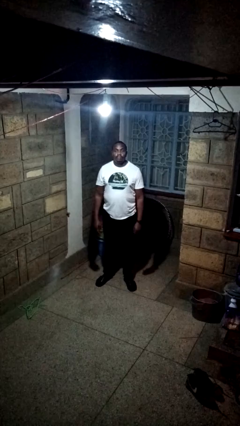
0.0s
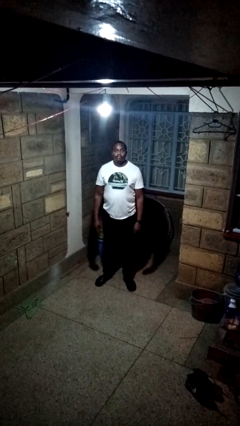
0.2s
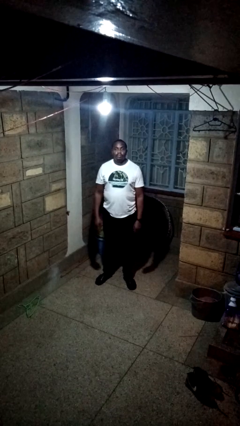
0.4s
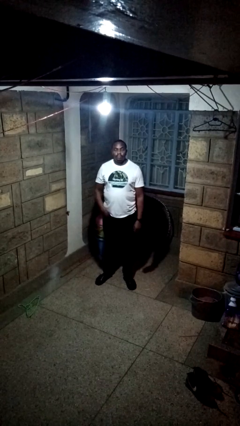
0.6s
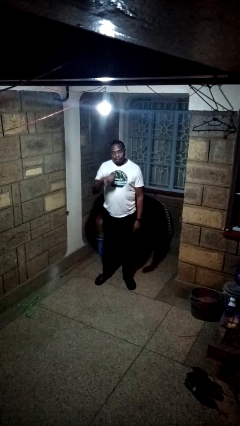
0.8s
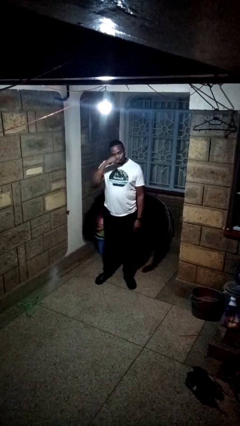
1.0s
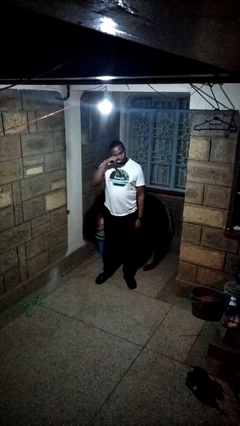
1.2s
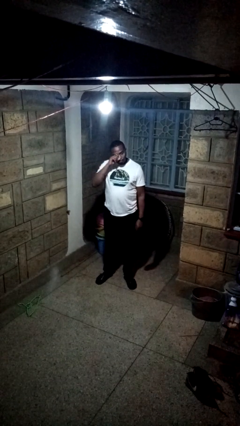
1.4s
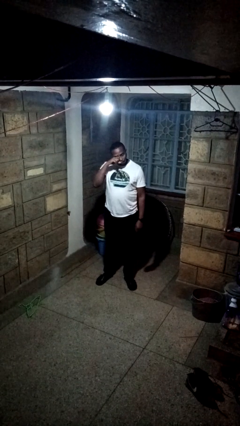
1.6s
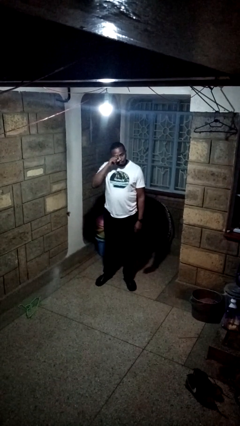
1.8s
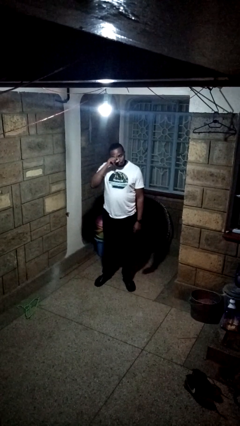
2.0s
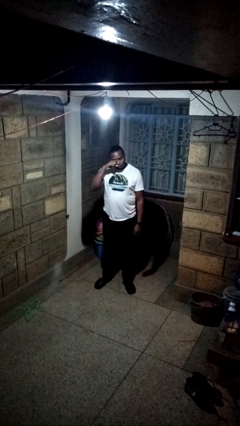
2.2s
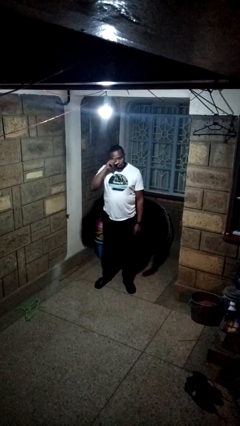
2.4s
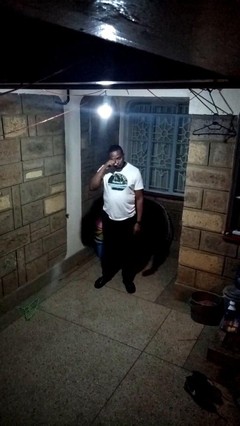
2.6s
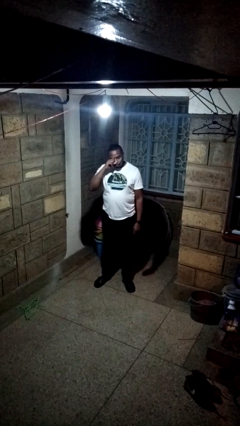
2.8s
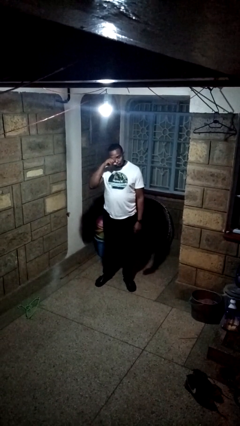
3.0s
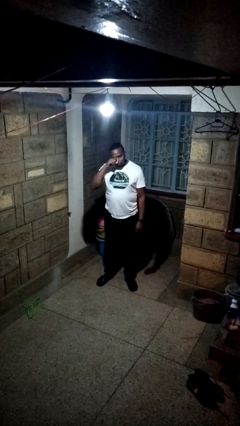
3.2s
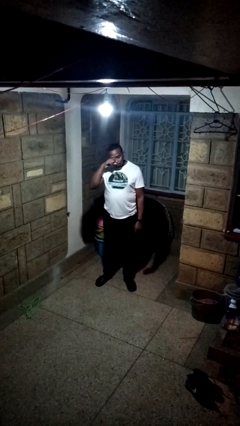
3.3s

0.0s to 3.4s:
person rubs eyes

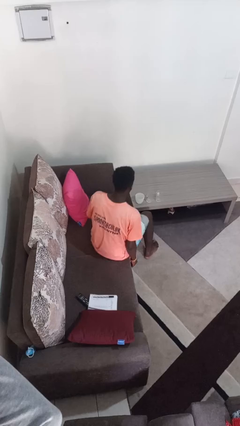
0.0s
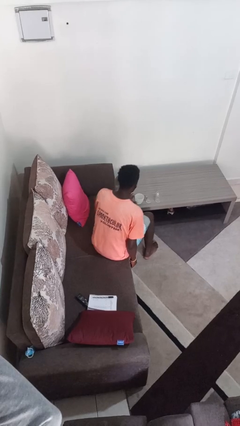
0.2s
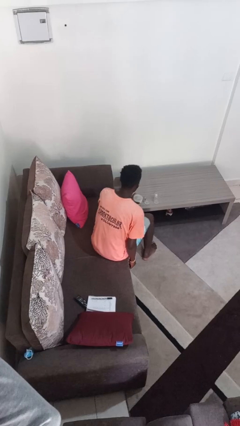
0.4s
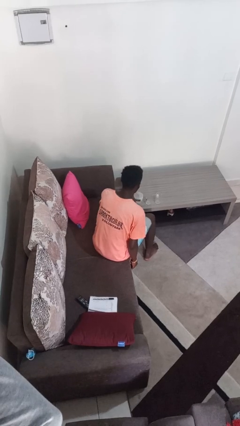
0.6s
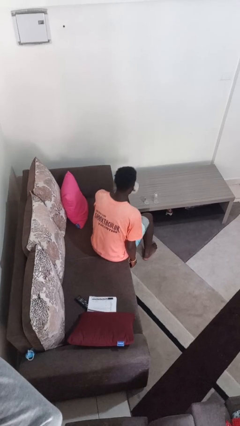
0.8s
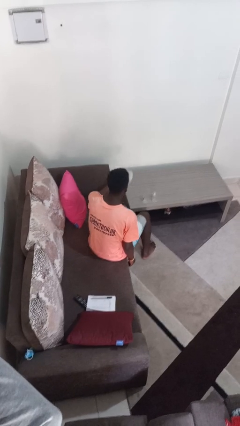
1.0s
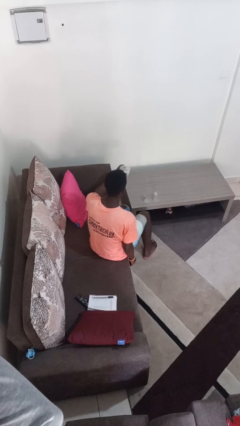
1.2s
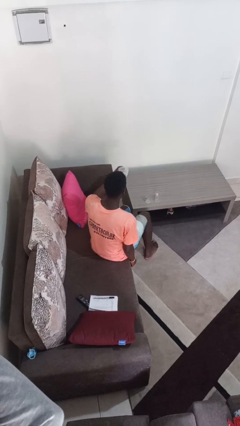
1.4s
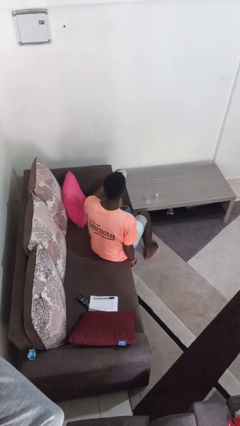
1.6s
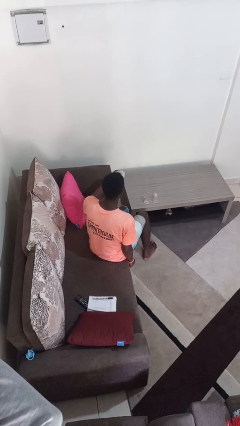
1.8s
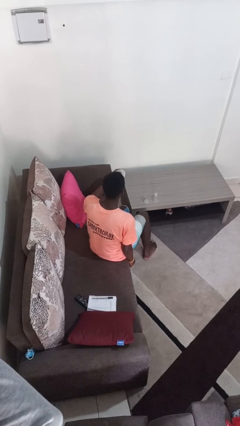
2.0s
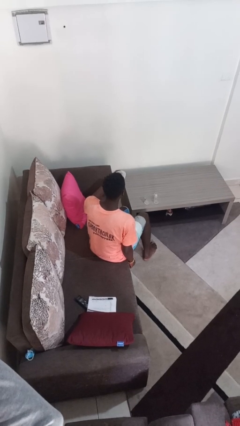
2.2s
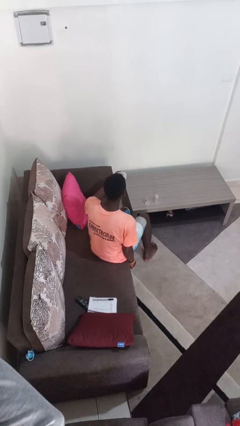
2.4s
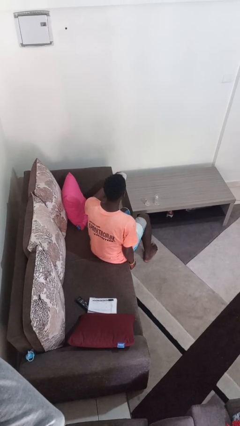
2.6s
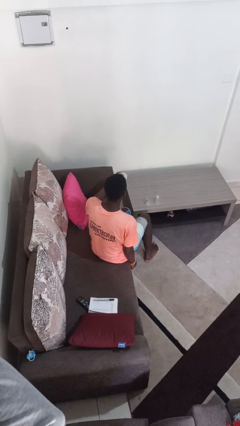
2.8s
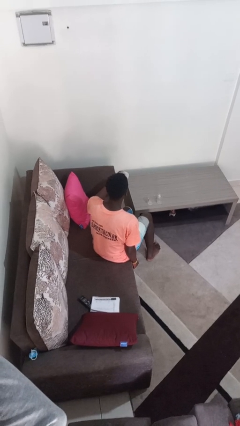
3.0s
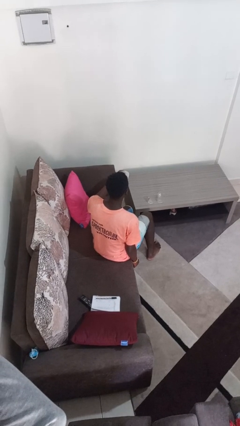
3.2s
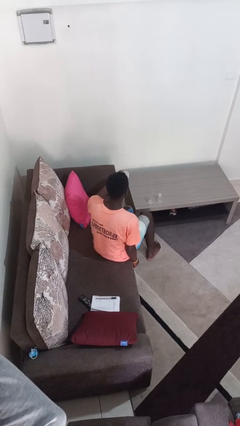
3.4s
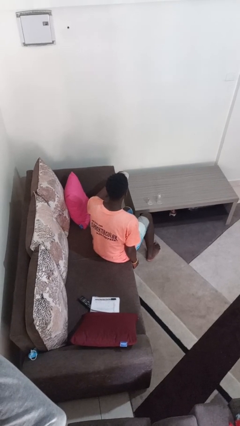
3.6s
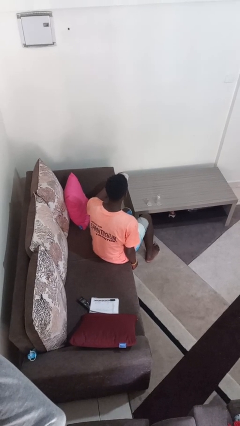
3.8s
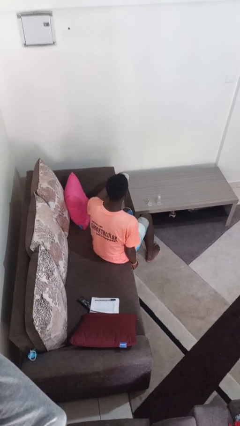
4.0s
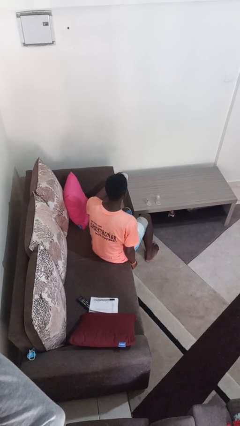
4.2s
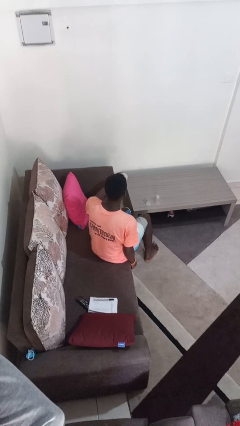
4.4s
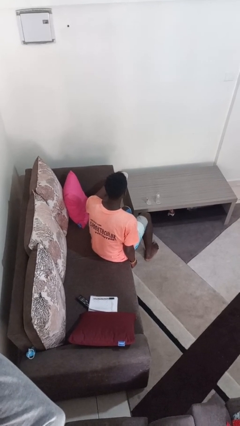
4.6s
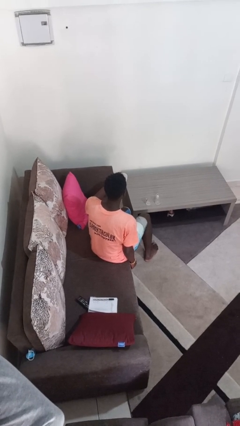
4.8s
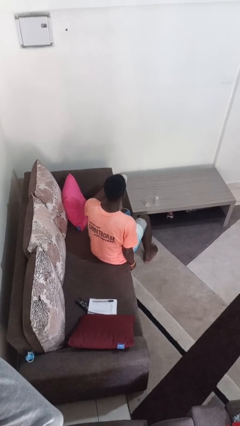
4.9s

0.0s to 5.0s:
person picks up object from table

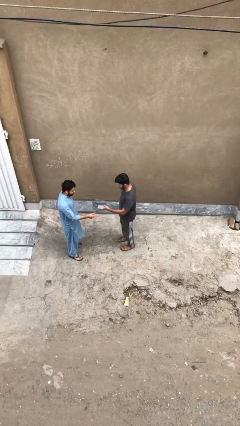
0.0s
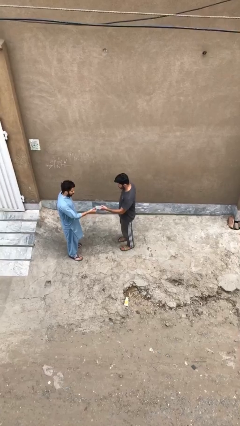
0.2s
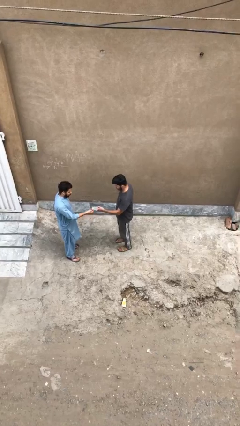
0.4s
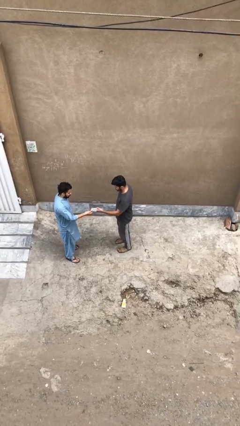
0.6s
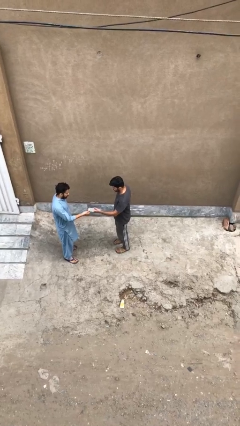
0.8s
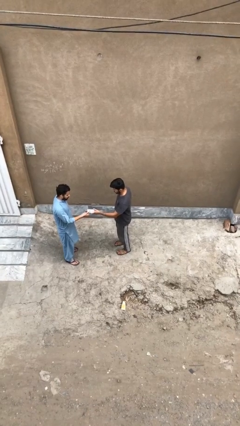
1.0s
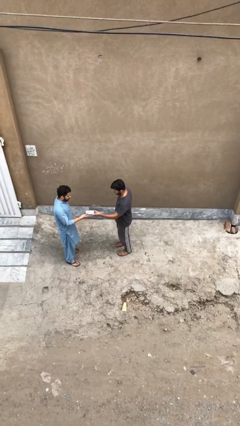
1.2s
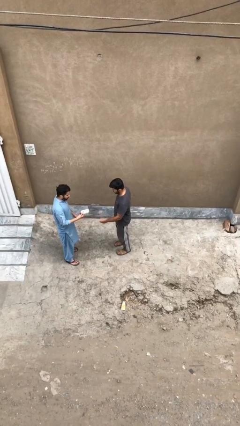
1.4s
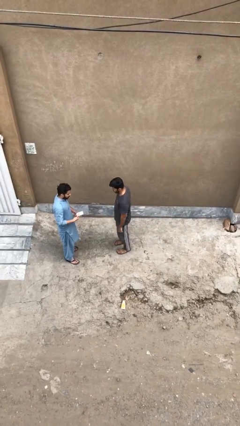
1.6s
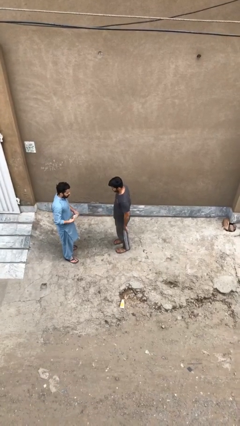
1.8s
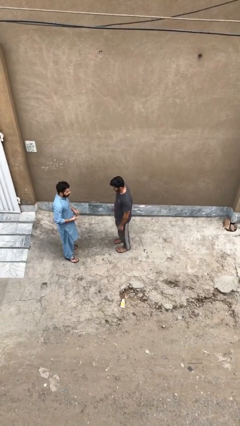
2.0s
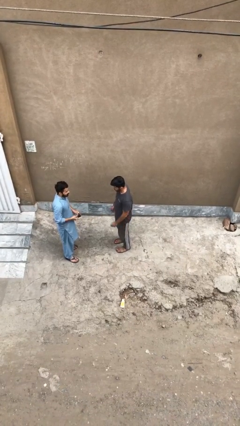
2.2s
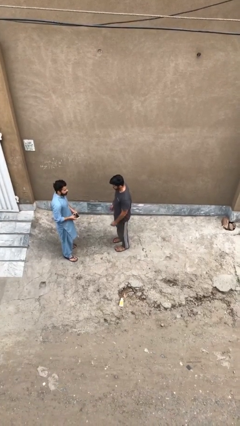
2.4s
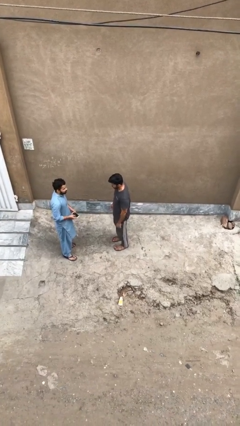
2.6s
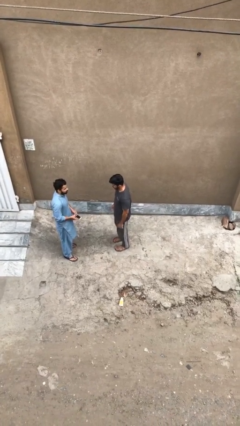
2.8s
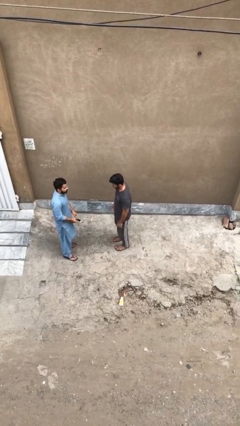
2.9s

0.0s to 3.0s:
person transfers object to person

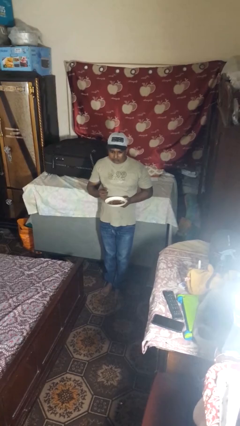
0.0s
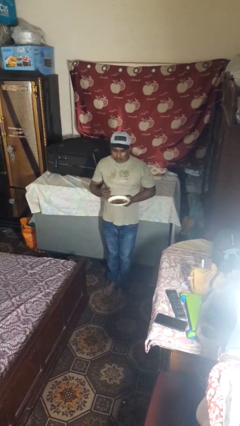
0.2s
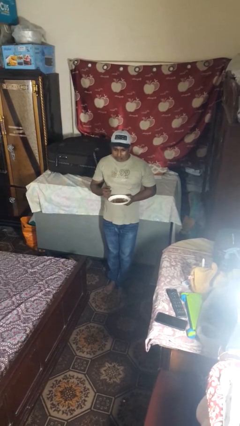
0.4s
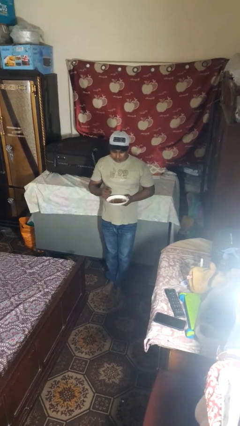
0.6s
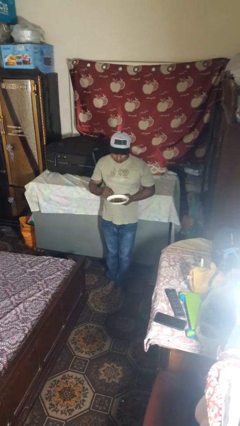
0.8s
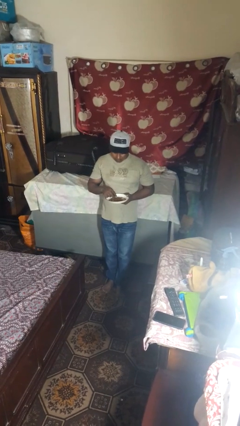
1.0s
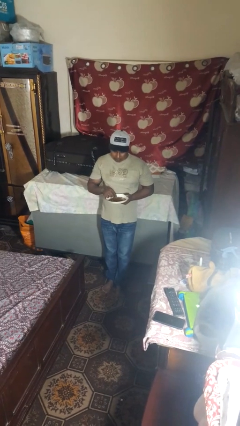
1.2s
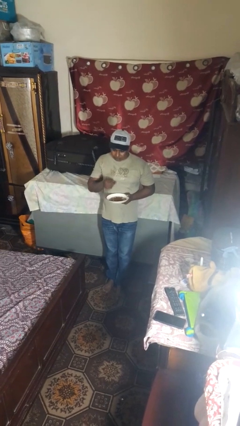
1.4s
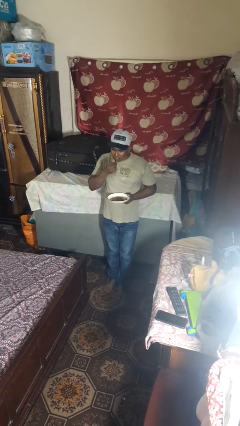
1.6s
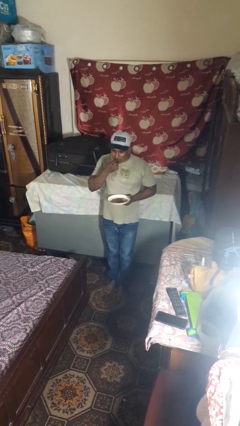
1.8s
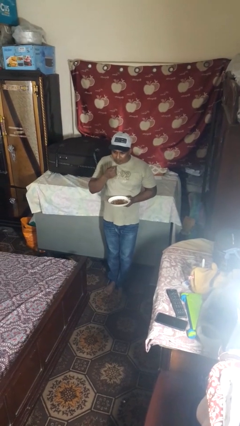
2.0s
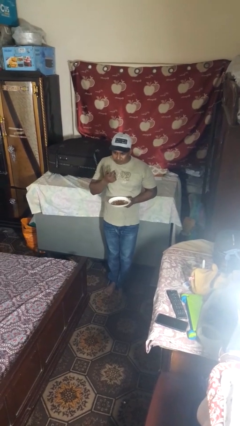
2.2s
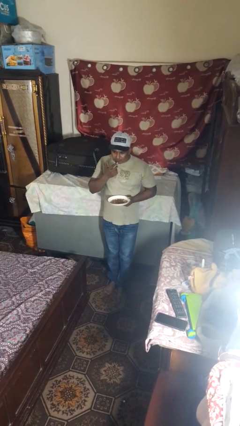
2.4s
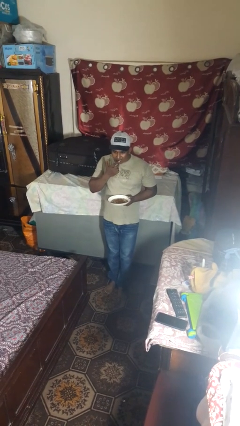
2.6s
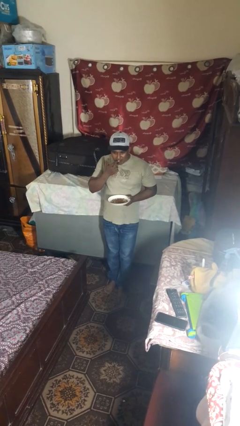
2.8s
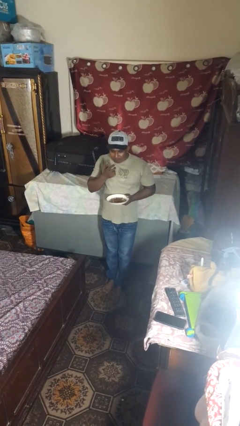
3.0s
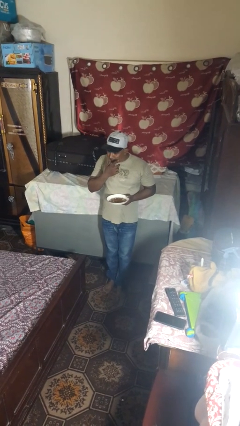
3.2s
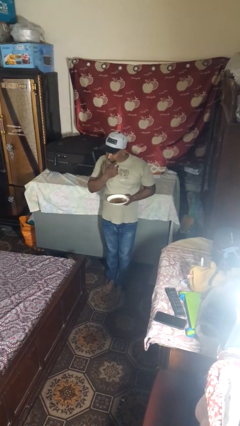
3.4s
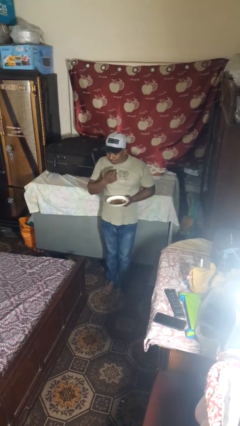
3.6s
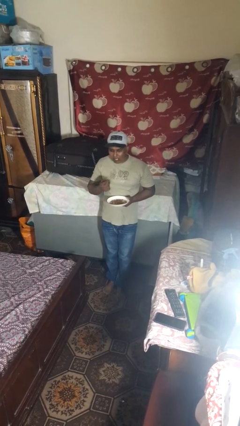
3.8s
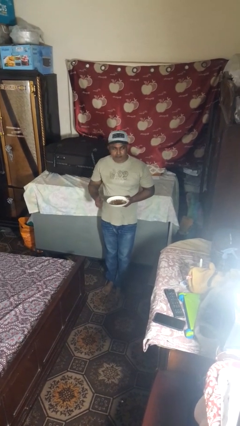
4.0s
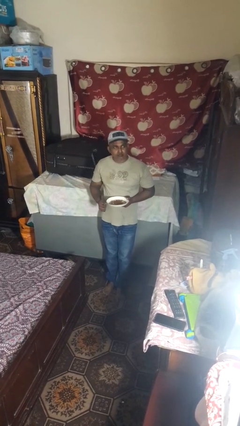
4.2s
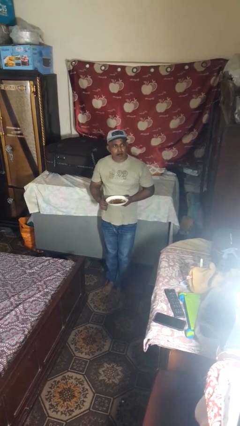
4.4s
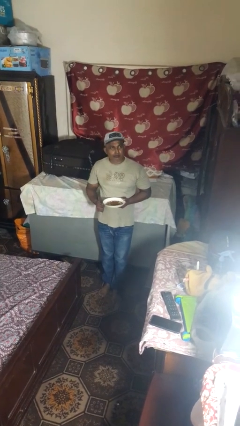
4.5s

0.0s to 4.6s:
person licks fingers

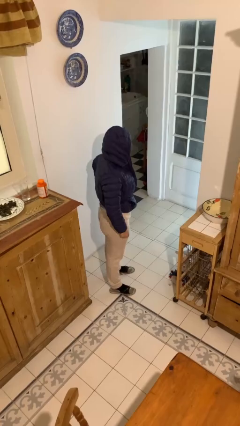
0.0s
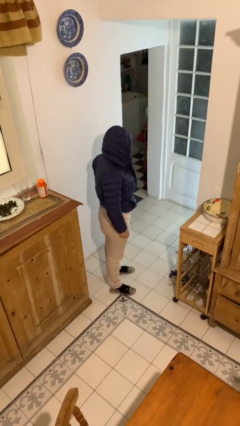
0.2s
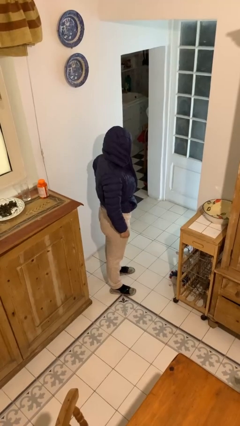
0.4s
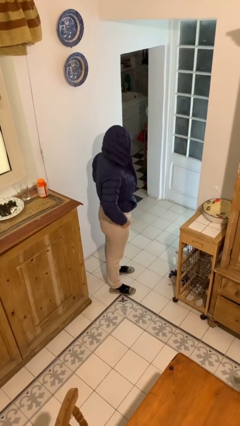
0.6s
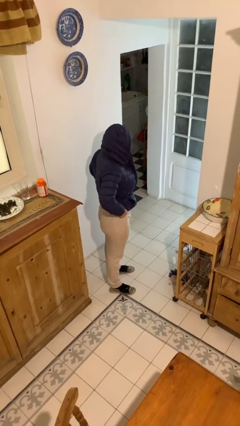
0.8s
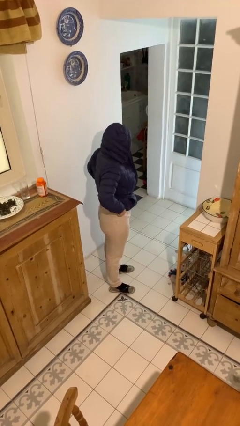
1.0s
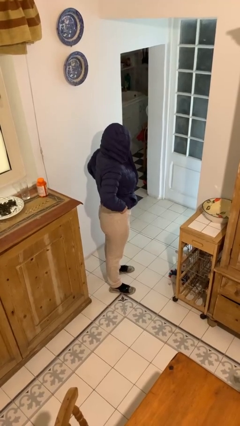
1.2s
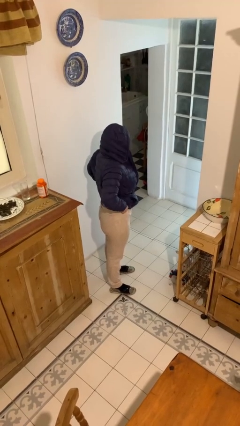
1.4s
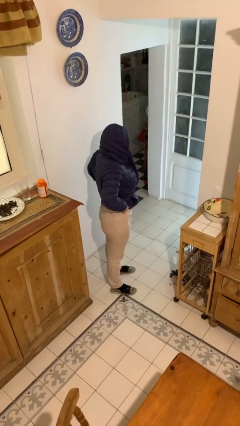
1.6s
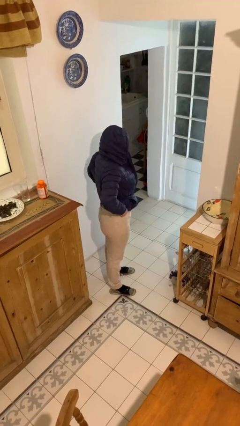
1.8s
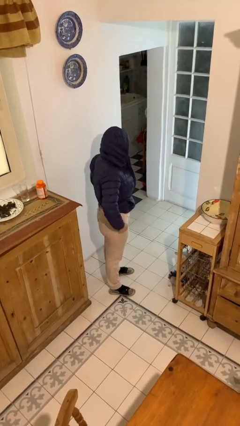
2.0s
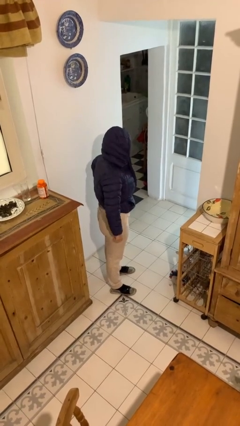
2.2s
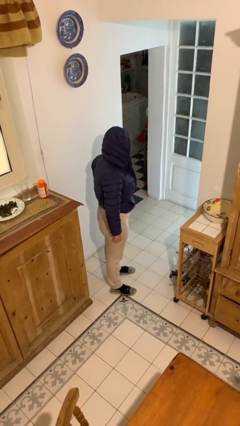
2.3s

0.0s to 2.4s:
person hikes up pants
